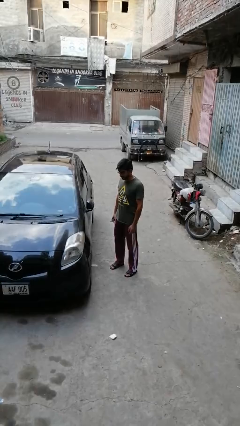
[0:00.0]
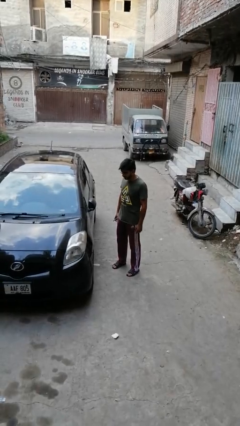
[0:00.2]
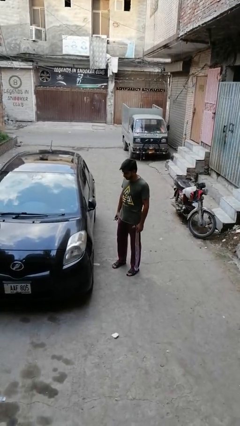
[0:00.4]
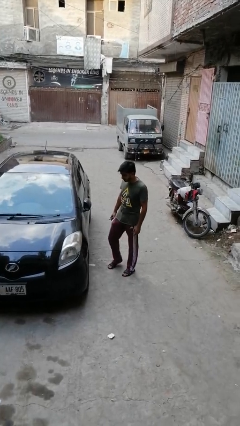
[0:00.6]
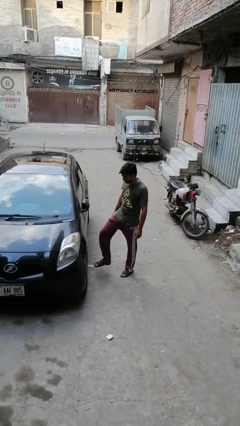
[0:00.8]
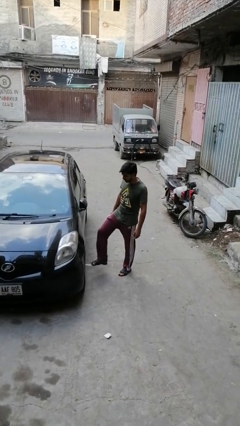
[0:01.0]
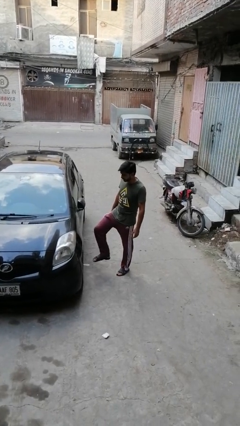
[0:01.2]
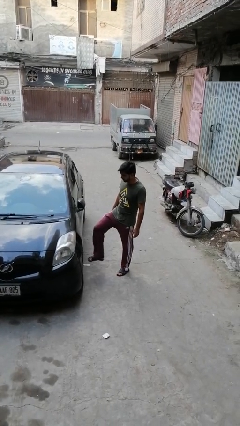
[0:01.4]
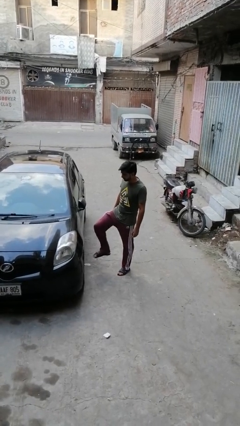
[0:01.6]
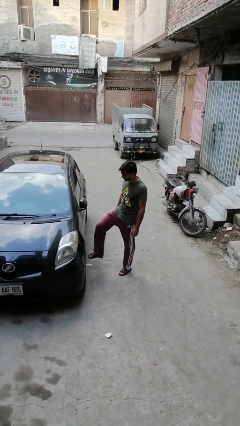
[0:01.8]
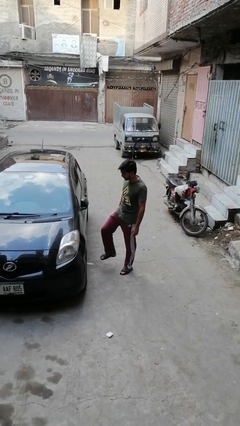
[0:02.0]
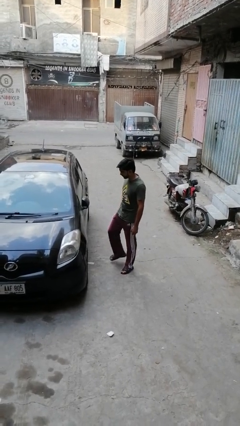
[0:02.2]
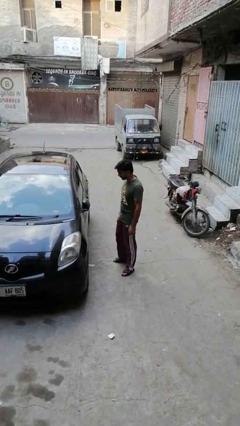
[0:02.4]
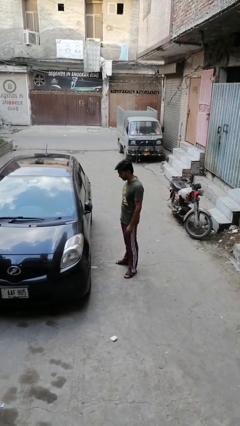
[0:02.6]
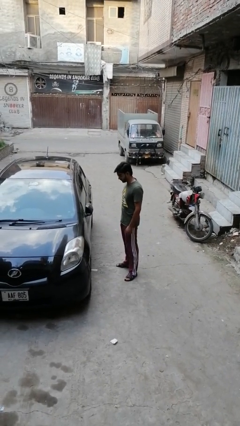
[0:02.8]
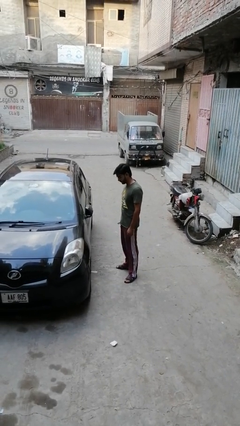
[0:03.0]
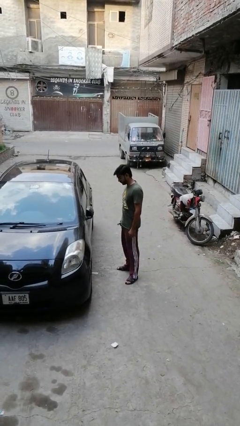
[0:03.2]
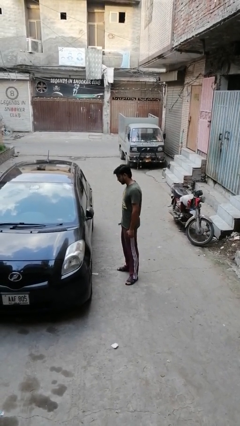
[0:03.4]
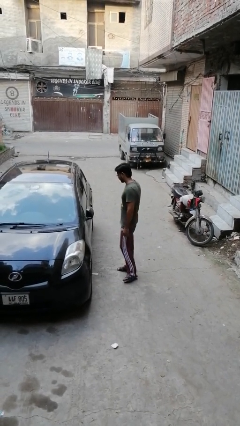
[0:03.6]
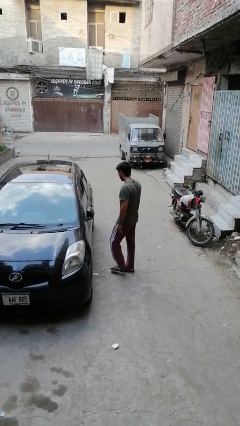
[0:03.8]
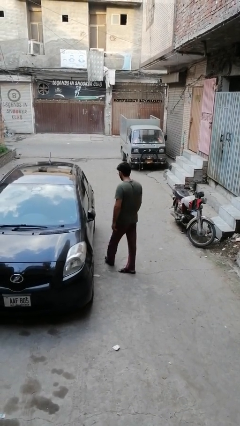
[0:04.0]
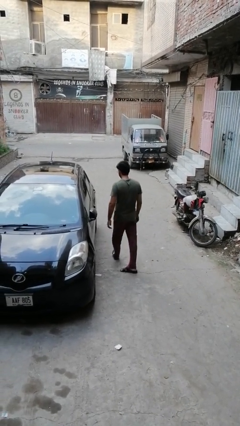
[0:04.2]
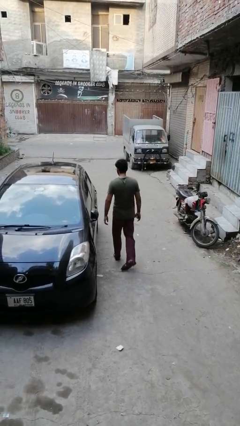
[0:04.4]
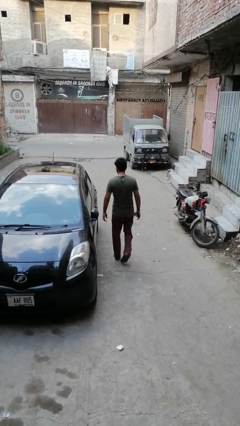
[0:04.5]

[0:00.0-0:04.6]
person kicks car tires

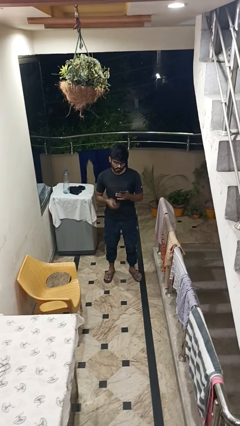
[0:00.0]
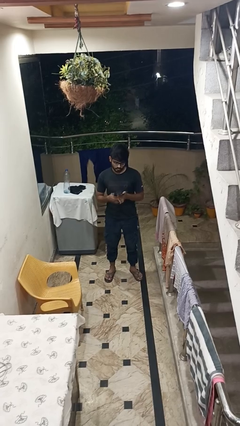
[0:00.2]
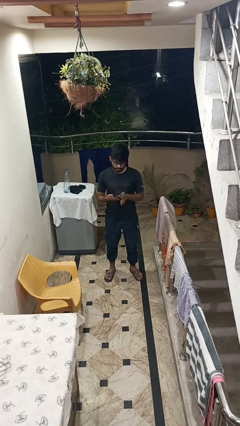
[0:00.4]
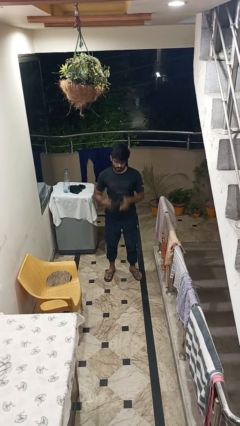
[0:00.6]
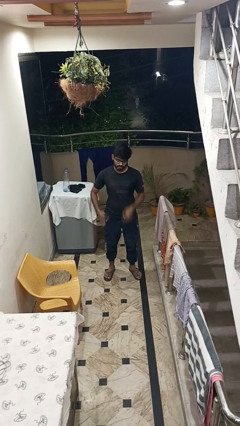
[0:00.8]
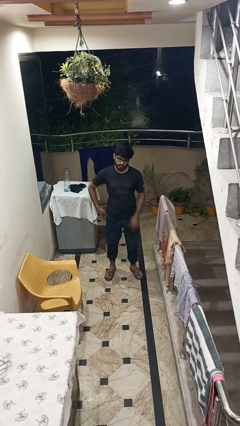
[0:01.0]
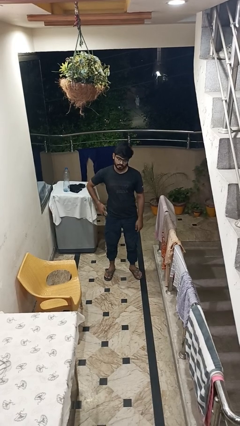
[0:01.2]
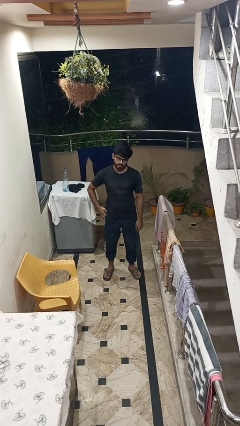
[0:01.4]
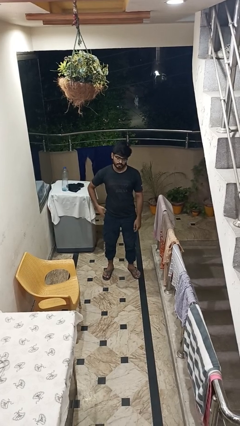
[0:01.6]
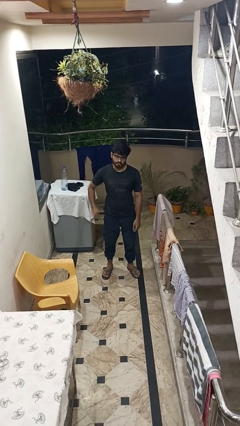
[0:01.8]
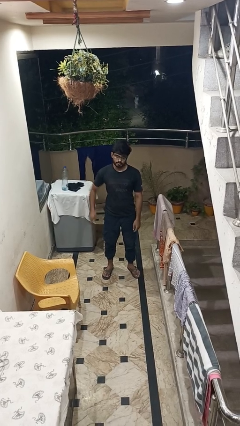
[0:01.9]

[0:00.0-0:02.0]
person puts phone into pocket

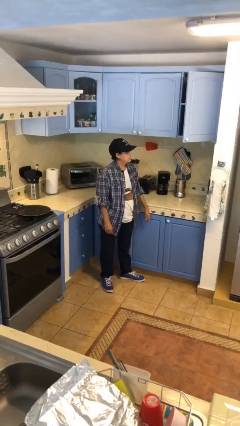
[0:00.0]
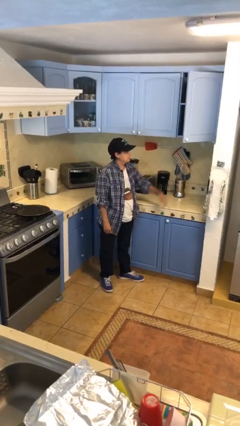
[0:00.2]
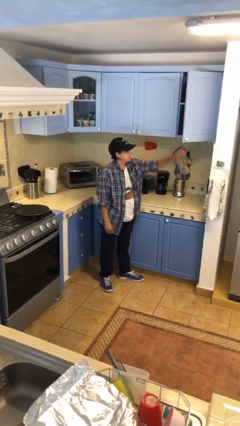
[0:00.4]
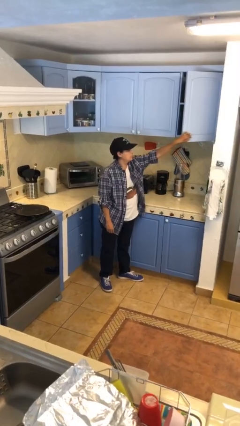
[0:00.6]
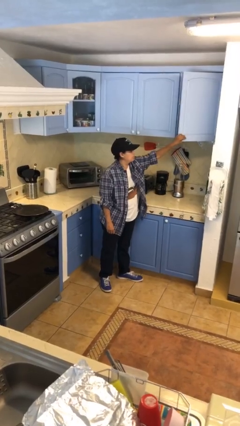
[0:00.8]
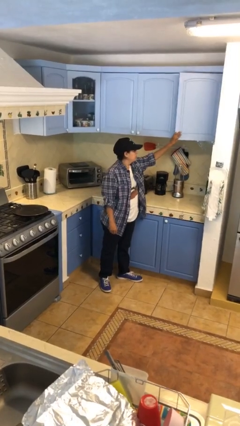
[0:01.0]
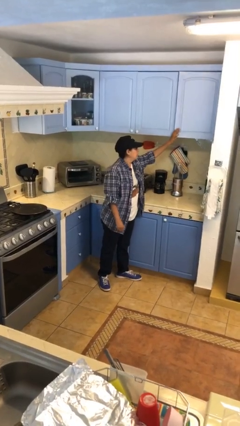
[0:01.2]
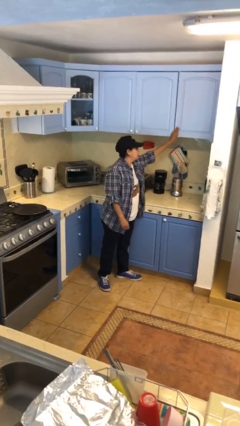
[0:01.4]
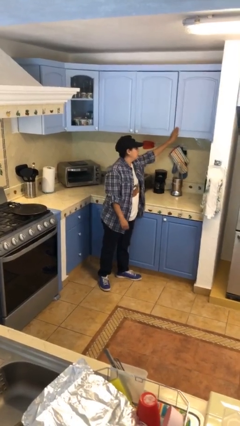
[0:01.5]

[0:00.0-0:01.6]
person closes cabinet

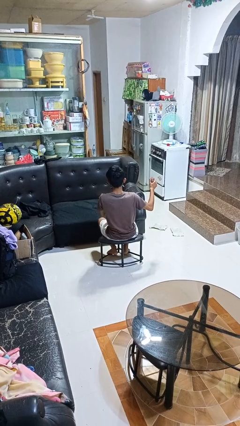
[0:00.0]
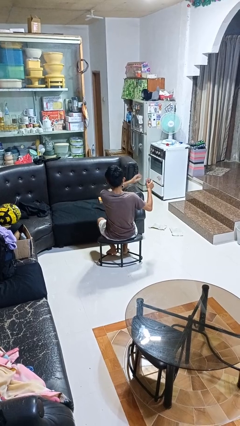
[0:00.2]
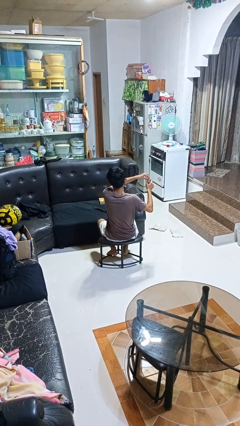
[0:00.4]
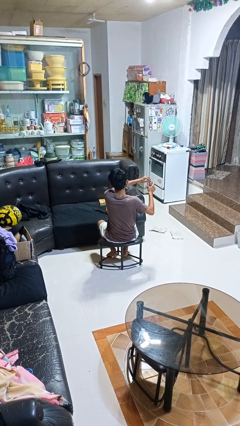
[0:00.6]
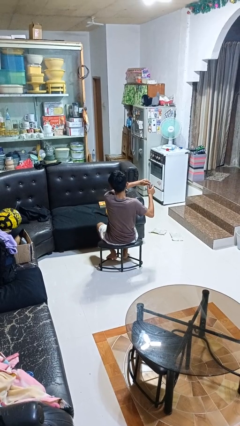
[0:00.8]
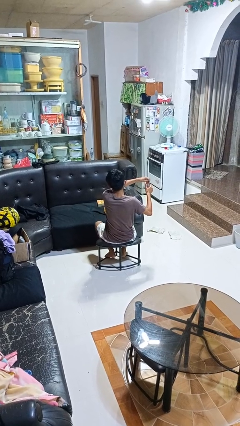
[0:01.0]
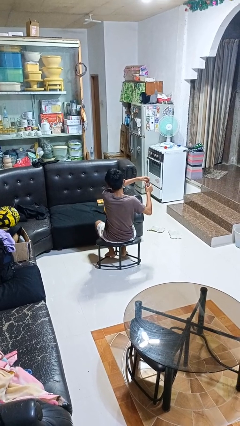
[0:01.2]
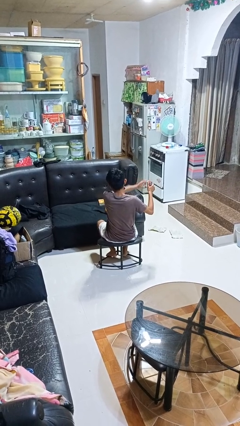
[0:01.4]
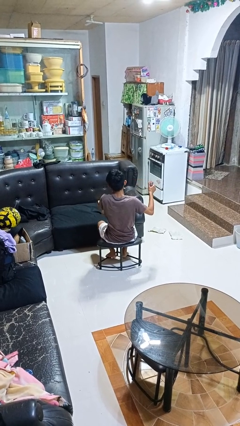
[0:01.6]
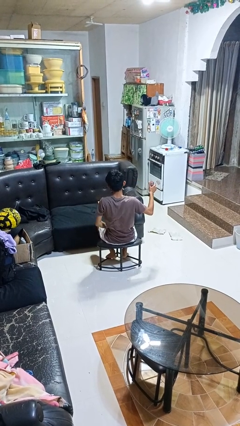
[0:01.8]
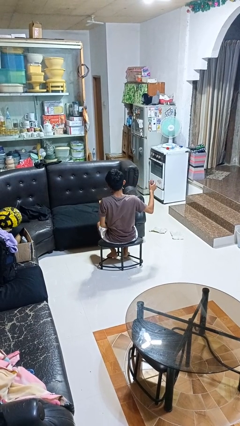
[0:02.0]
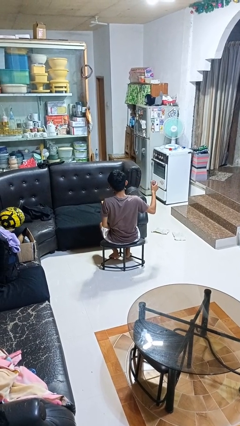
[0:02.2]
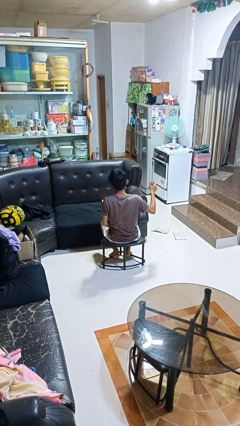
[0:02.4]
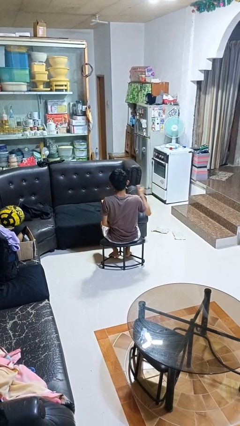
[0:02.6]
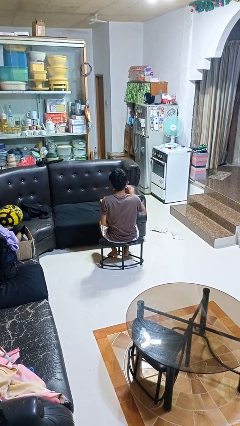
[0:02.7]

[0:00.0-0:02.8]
person opens beverage can

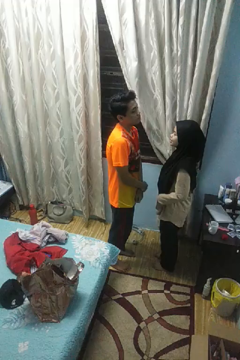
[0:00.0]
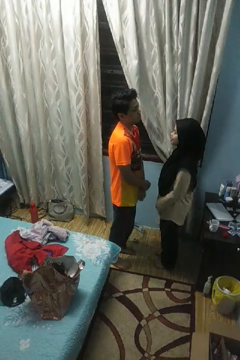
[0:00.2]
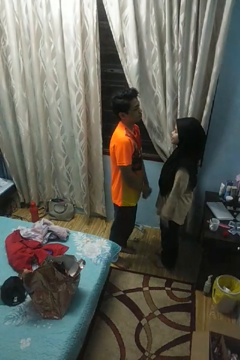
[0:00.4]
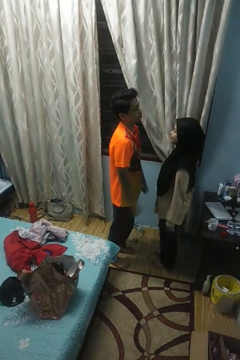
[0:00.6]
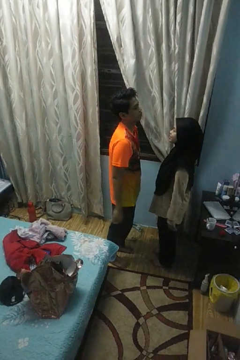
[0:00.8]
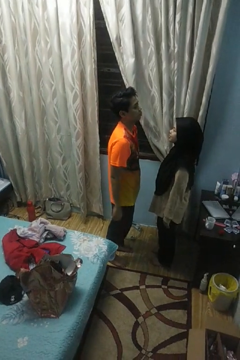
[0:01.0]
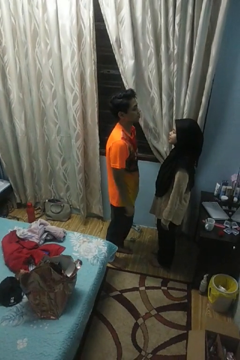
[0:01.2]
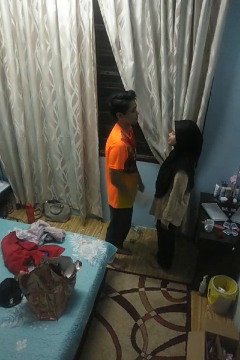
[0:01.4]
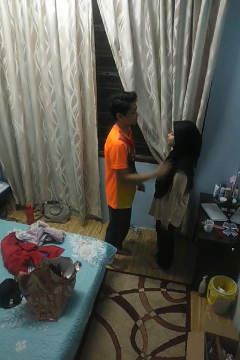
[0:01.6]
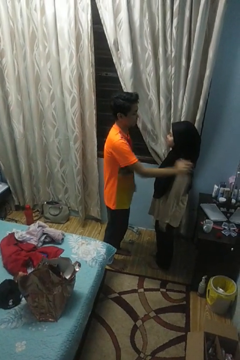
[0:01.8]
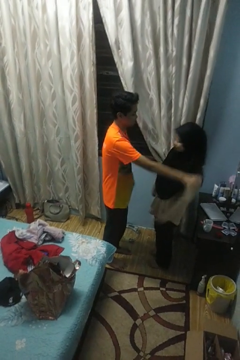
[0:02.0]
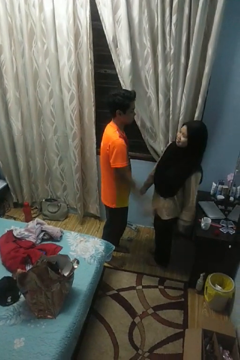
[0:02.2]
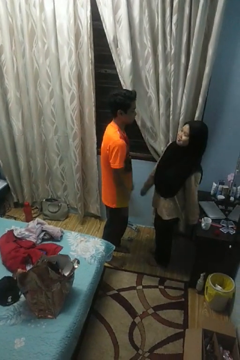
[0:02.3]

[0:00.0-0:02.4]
person shoves person

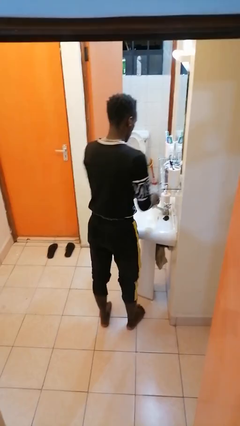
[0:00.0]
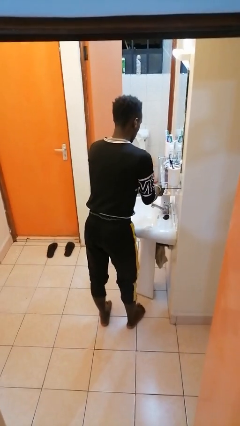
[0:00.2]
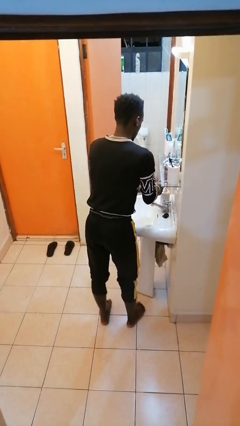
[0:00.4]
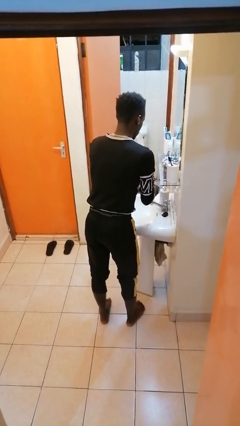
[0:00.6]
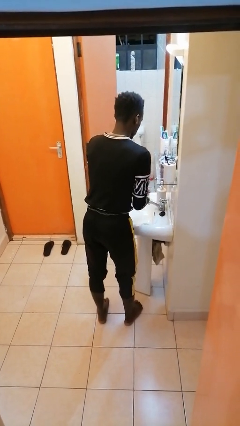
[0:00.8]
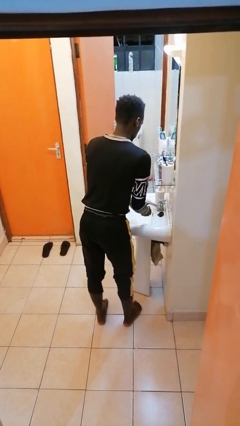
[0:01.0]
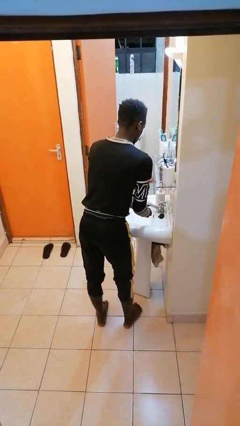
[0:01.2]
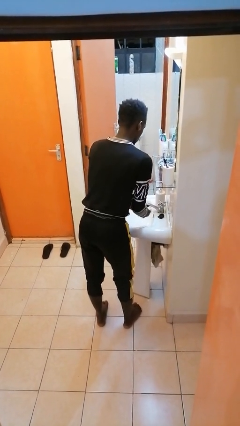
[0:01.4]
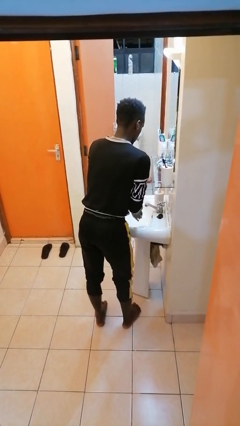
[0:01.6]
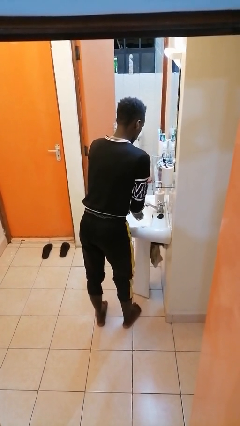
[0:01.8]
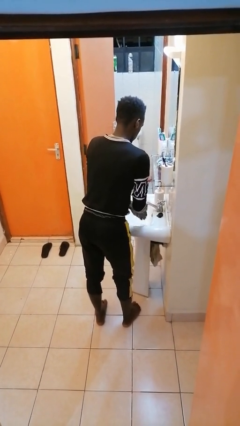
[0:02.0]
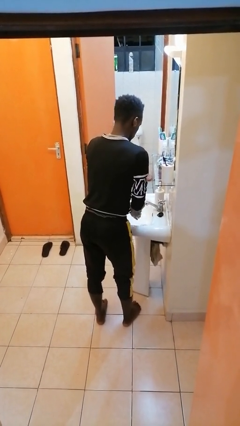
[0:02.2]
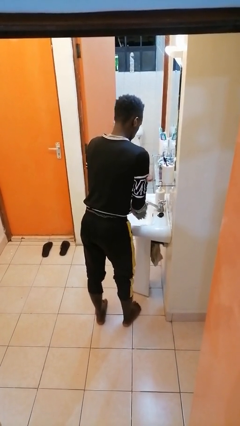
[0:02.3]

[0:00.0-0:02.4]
person washes hands

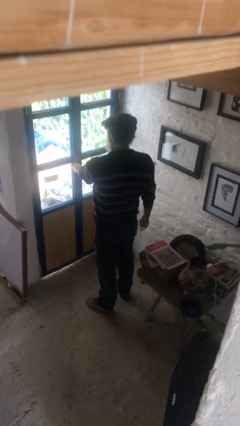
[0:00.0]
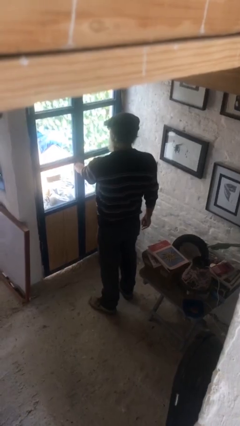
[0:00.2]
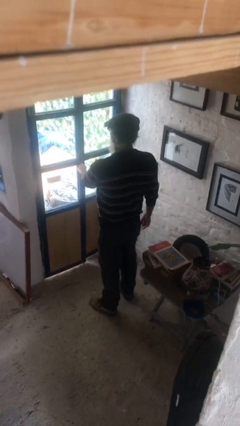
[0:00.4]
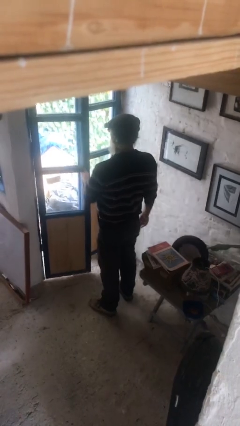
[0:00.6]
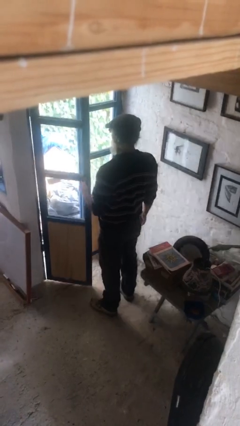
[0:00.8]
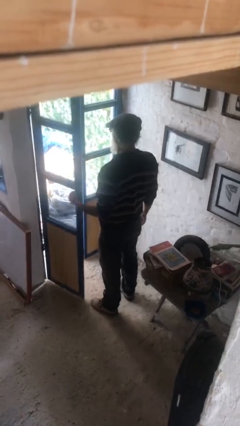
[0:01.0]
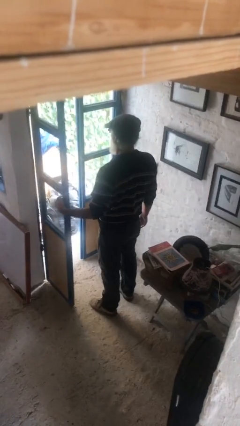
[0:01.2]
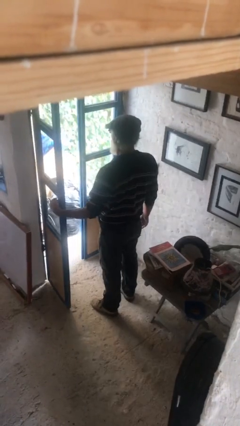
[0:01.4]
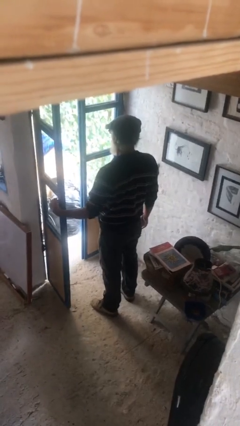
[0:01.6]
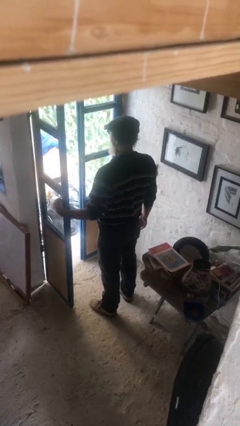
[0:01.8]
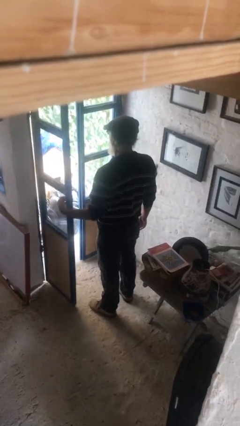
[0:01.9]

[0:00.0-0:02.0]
person opens facility door
